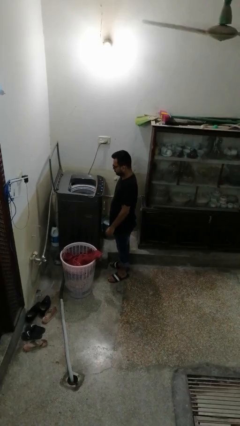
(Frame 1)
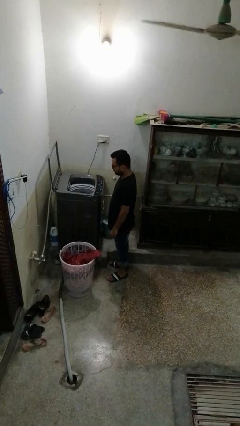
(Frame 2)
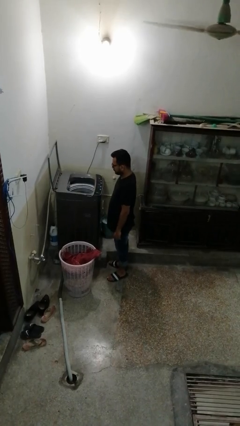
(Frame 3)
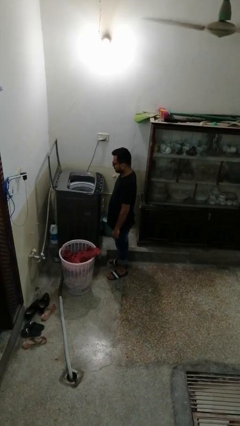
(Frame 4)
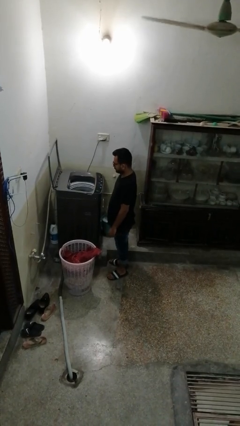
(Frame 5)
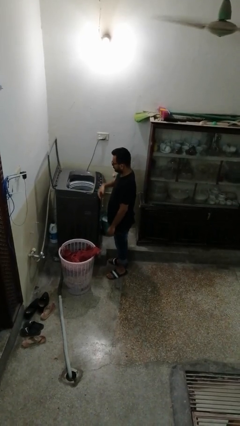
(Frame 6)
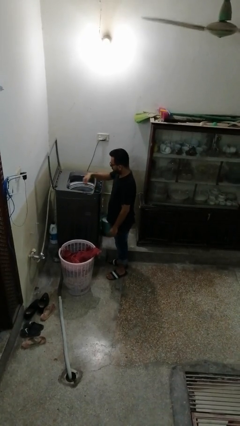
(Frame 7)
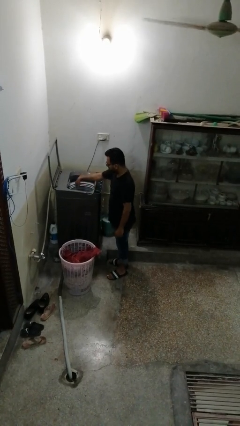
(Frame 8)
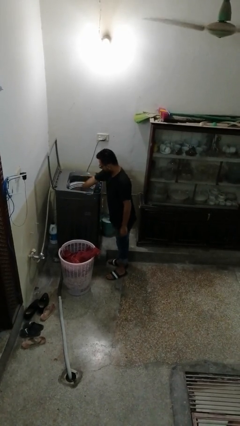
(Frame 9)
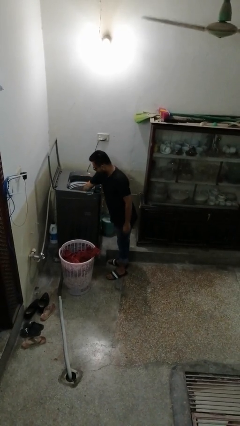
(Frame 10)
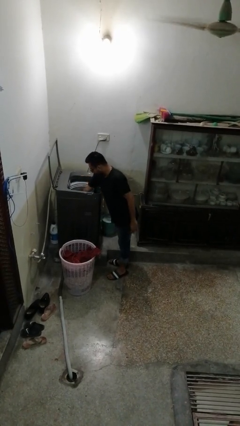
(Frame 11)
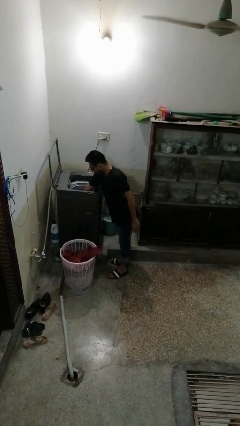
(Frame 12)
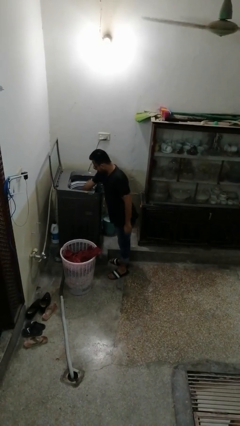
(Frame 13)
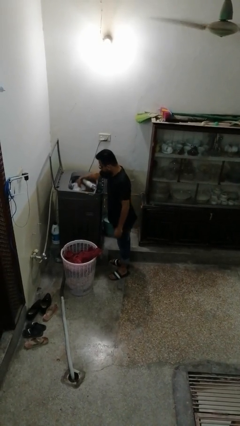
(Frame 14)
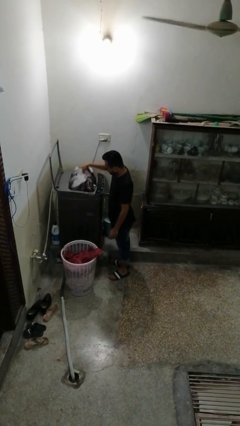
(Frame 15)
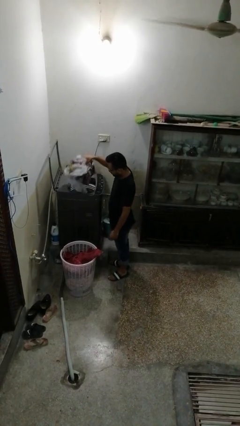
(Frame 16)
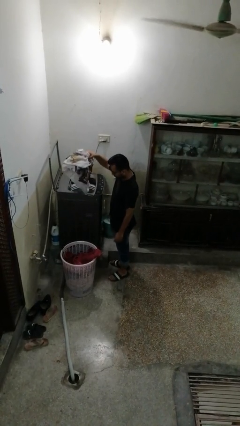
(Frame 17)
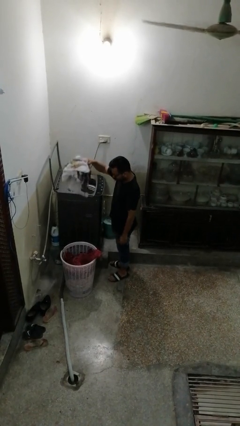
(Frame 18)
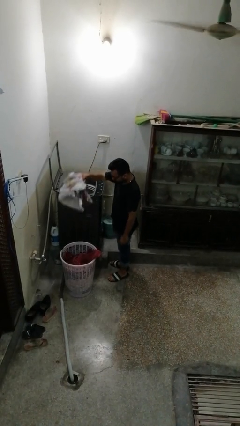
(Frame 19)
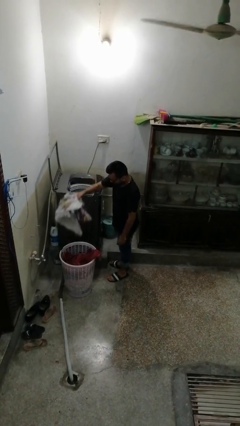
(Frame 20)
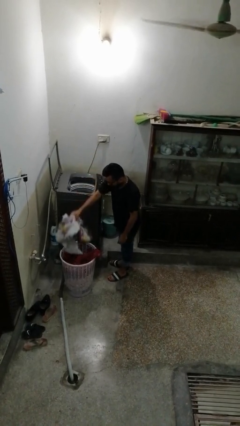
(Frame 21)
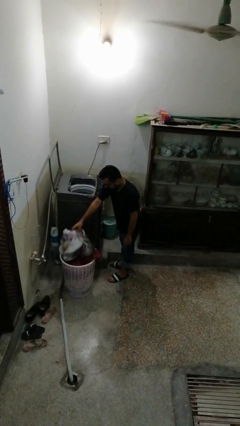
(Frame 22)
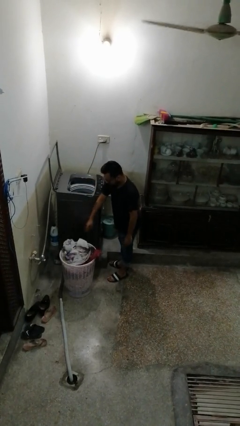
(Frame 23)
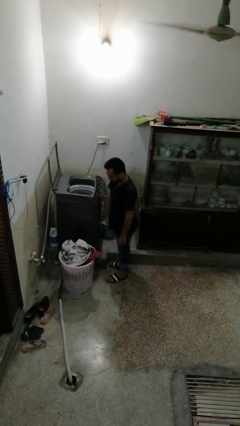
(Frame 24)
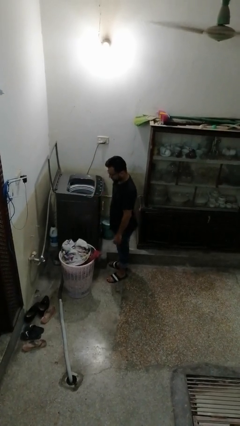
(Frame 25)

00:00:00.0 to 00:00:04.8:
person unloads clotheswasher

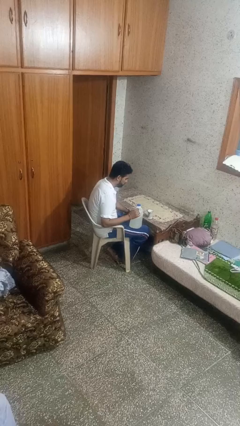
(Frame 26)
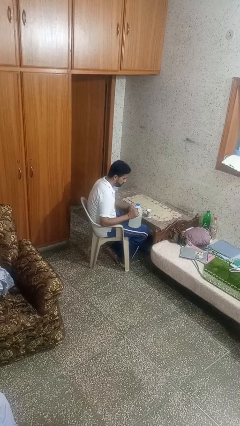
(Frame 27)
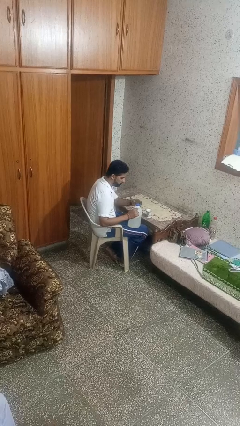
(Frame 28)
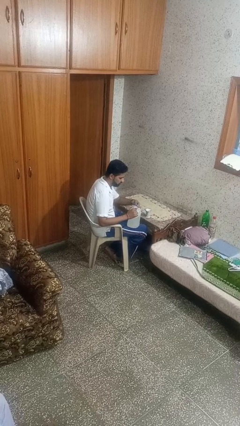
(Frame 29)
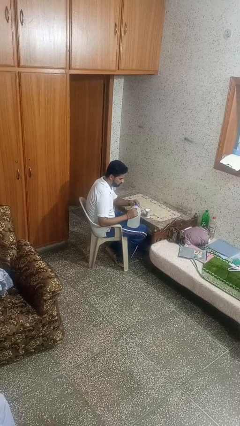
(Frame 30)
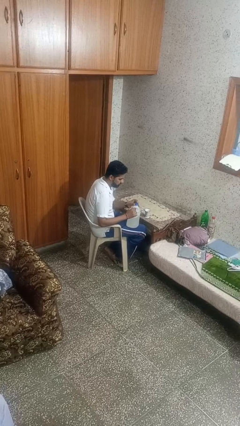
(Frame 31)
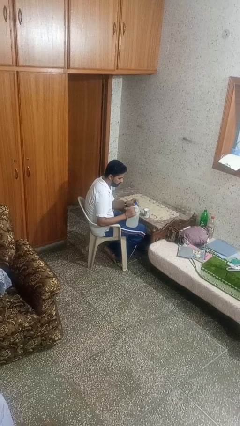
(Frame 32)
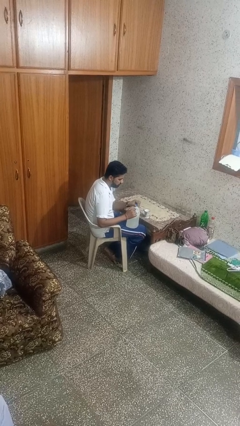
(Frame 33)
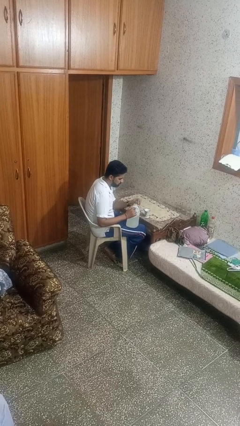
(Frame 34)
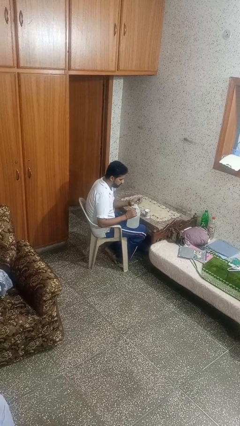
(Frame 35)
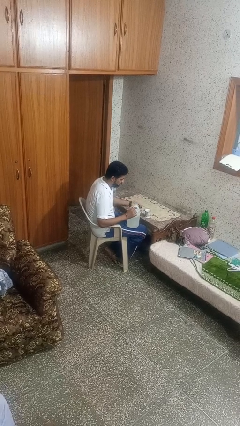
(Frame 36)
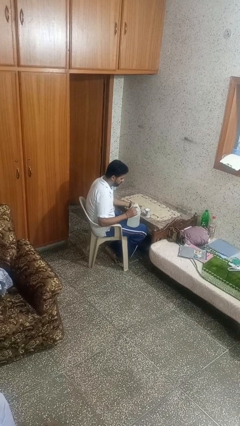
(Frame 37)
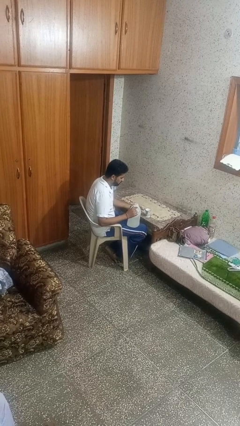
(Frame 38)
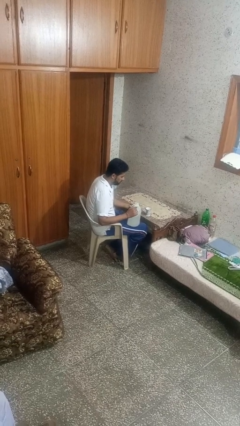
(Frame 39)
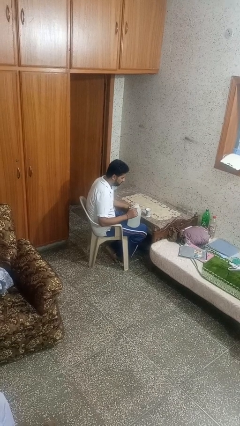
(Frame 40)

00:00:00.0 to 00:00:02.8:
person unscrews lid from bottle

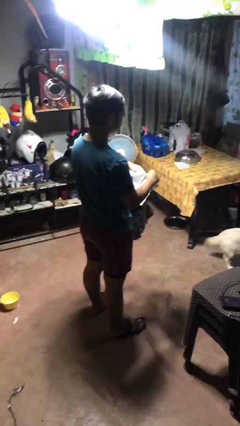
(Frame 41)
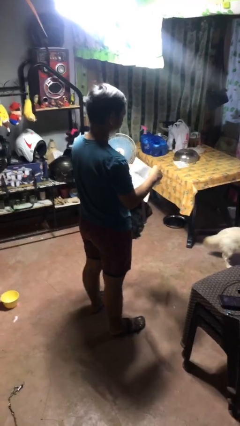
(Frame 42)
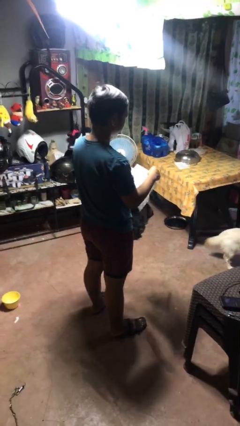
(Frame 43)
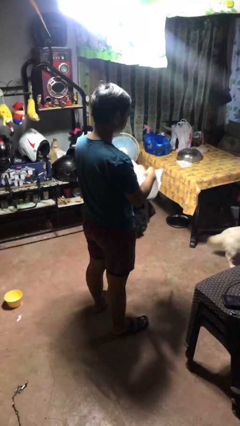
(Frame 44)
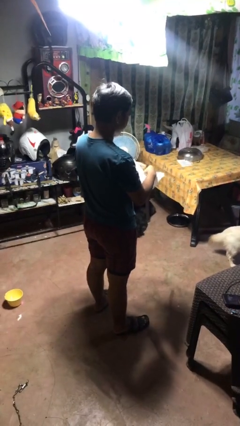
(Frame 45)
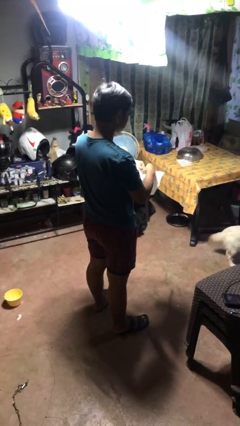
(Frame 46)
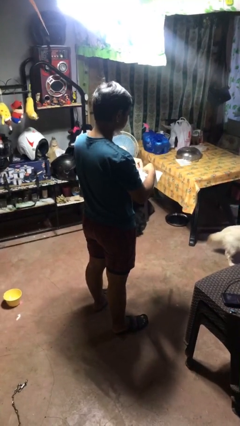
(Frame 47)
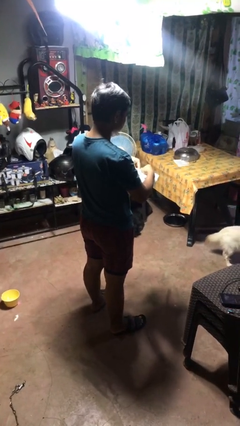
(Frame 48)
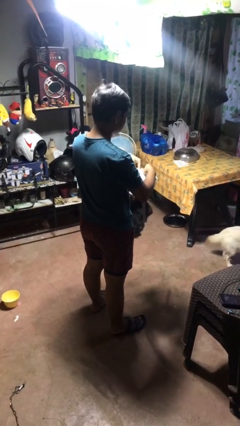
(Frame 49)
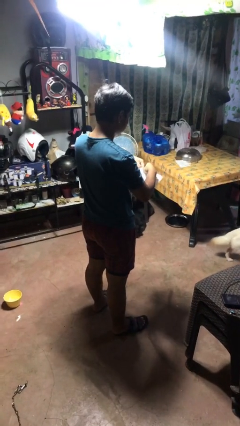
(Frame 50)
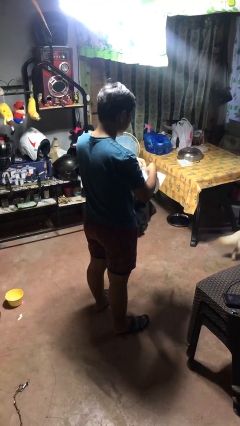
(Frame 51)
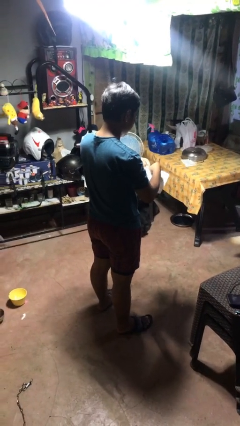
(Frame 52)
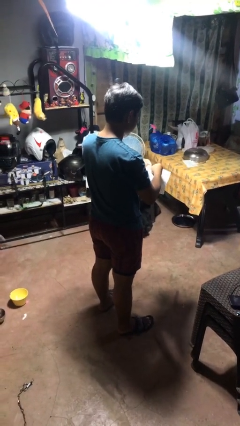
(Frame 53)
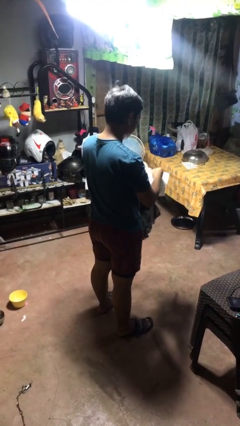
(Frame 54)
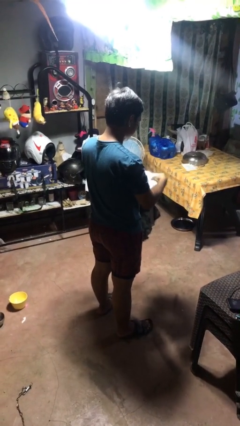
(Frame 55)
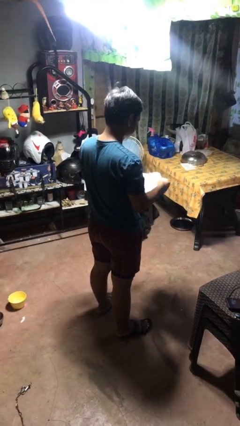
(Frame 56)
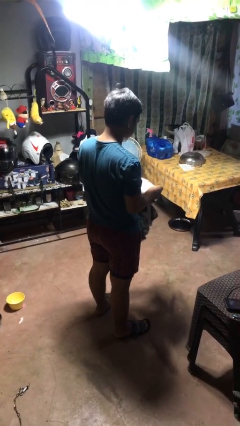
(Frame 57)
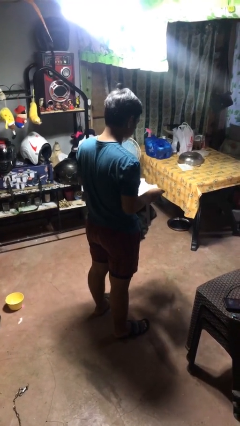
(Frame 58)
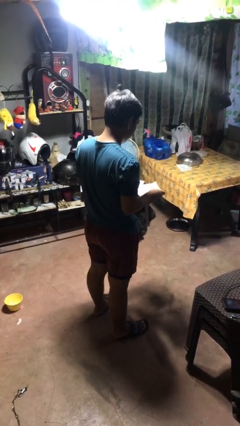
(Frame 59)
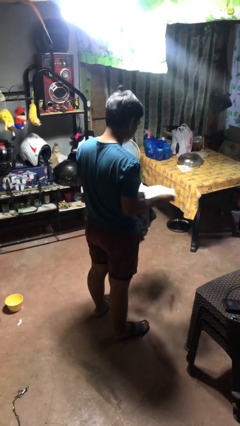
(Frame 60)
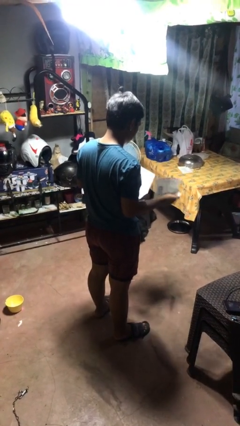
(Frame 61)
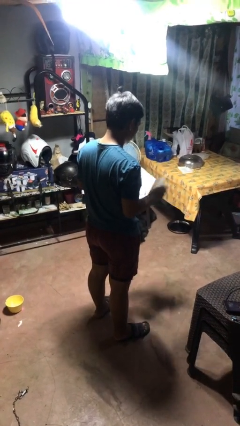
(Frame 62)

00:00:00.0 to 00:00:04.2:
person tears paper

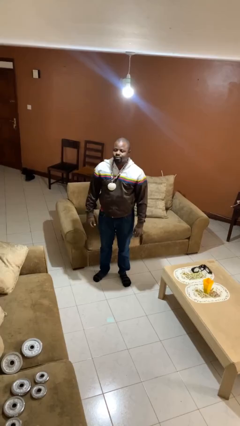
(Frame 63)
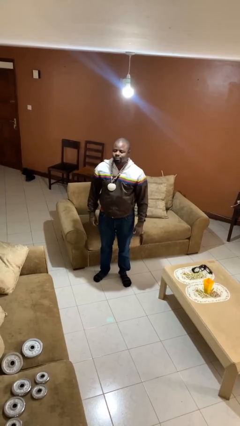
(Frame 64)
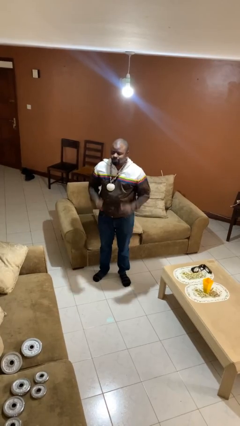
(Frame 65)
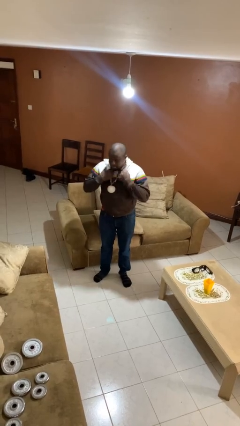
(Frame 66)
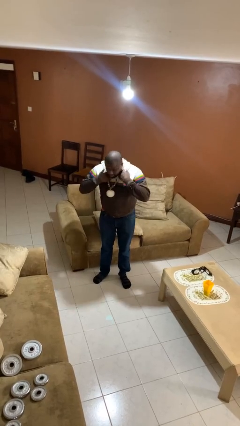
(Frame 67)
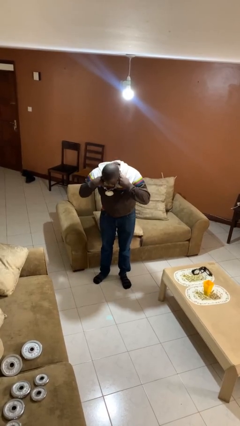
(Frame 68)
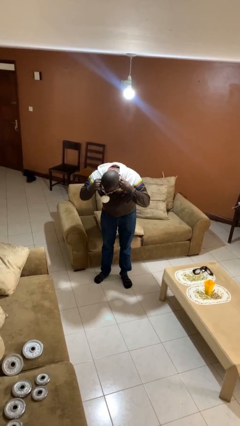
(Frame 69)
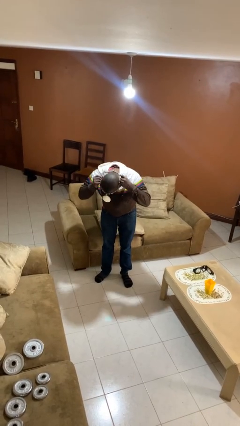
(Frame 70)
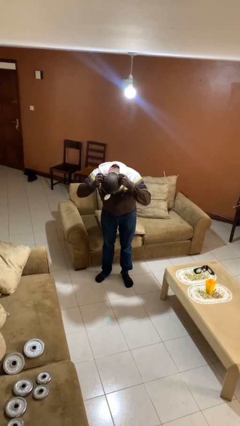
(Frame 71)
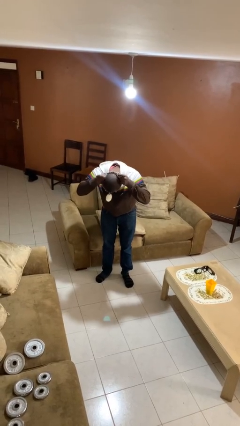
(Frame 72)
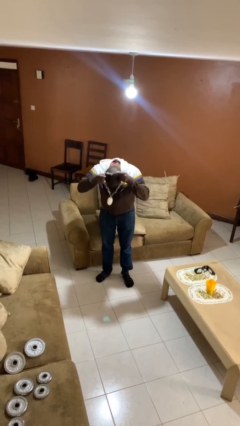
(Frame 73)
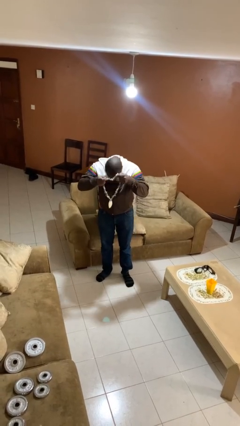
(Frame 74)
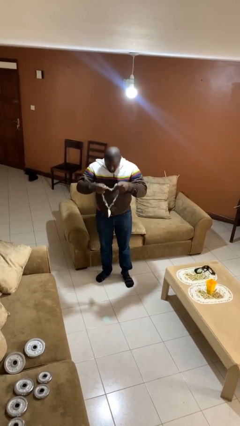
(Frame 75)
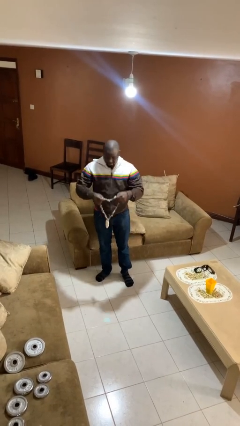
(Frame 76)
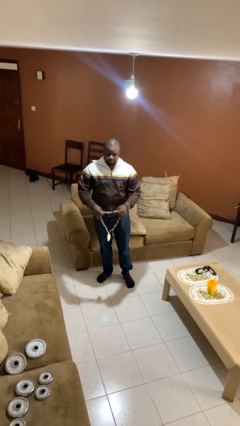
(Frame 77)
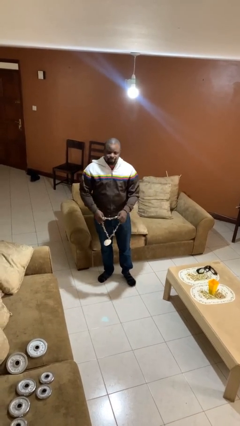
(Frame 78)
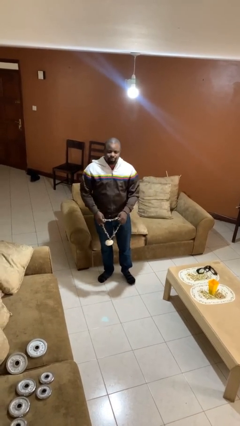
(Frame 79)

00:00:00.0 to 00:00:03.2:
person takes off necklace

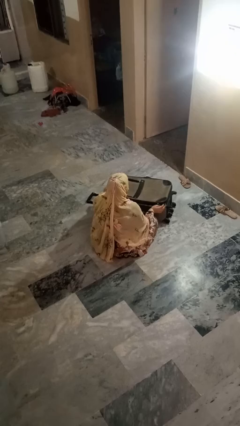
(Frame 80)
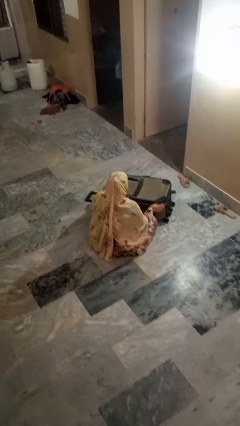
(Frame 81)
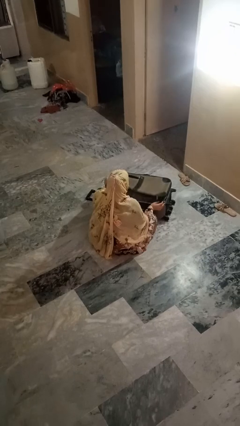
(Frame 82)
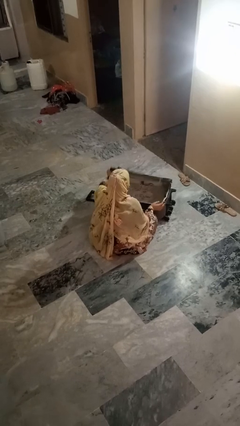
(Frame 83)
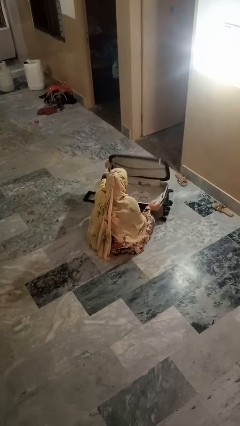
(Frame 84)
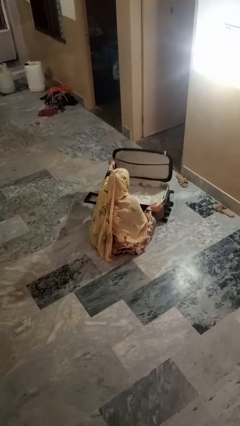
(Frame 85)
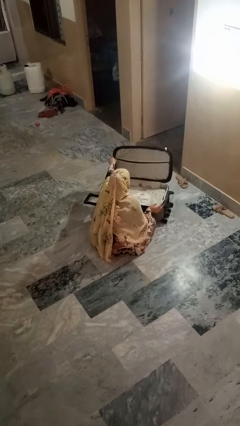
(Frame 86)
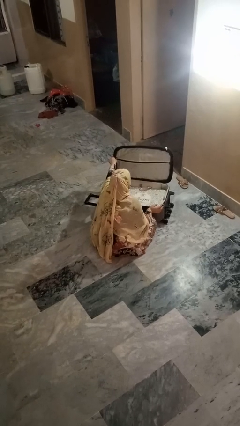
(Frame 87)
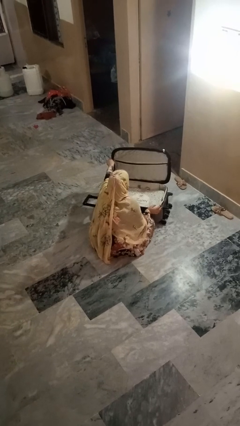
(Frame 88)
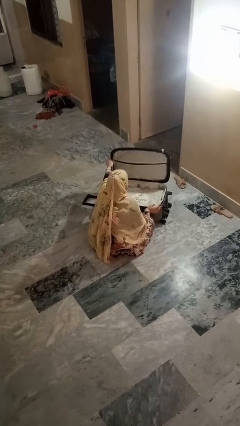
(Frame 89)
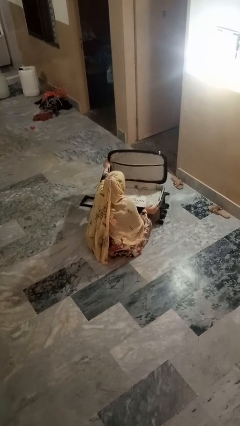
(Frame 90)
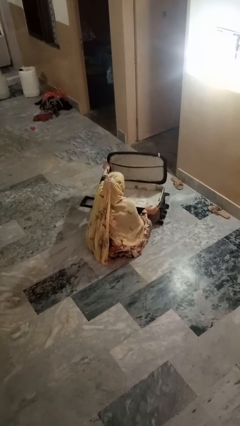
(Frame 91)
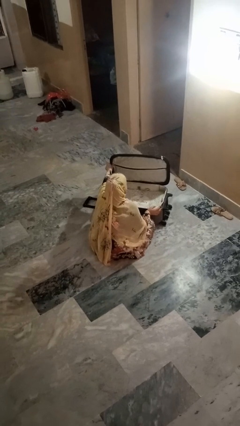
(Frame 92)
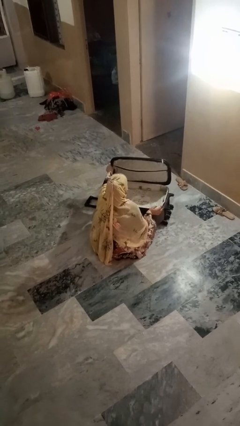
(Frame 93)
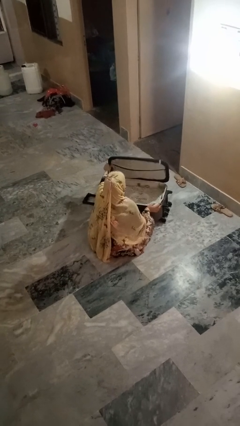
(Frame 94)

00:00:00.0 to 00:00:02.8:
person opens suitcase
